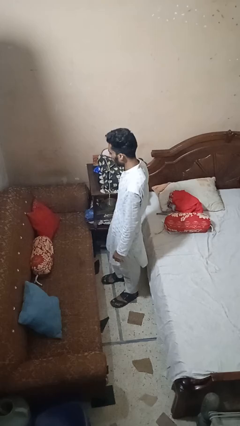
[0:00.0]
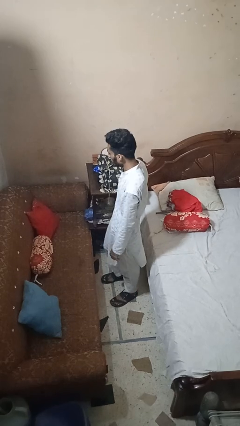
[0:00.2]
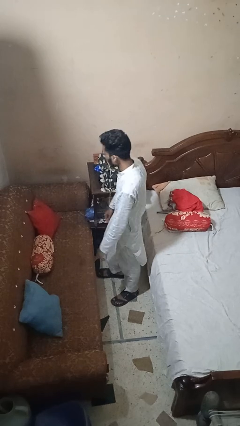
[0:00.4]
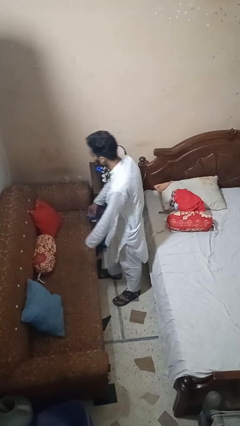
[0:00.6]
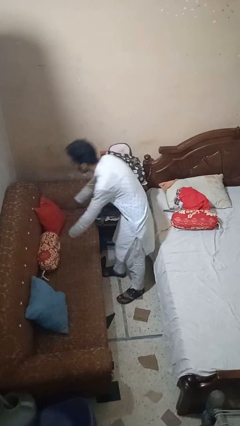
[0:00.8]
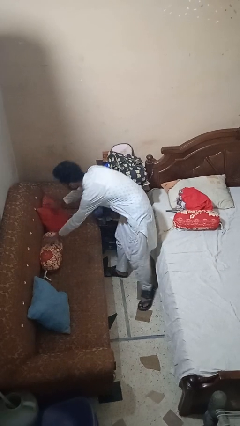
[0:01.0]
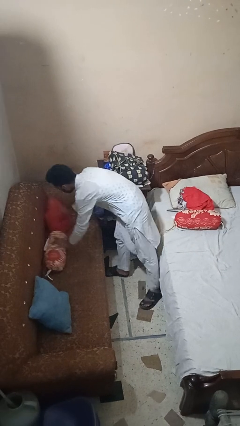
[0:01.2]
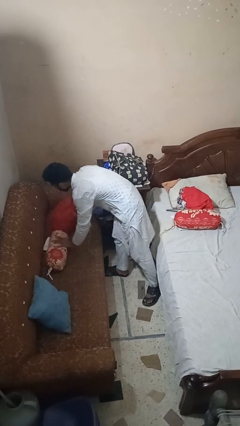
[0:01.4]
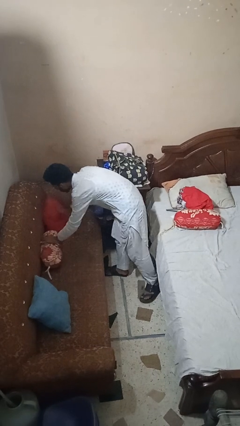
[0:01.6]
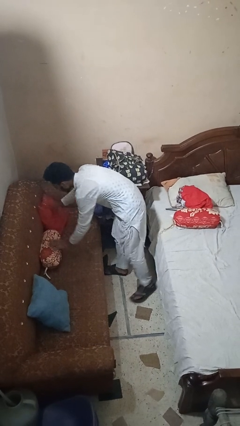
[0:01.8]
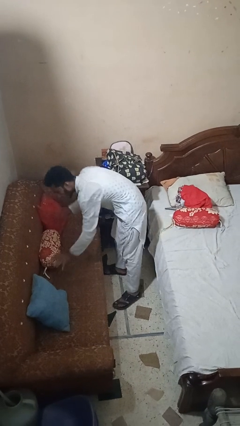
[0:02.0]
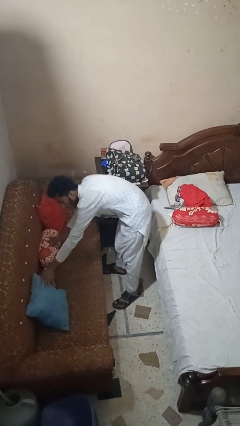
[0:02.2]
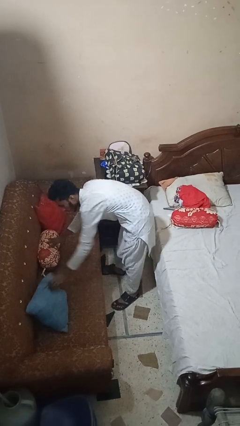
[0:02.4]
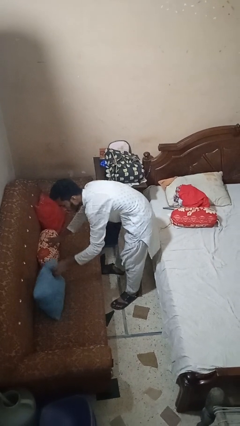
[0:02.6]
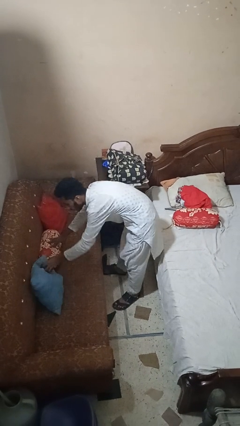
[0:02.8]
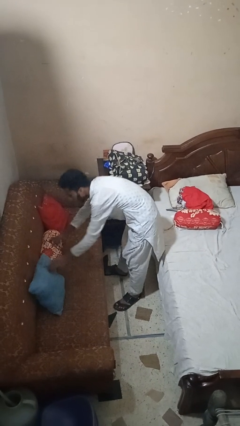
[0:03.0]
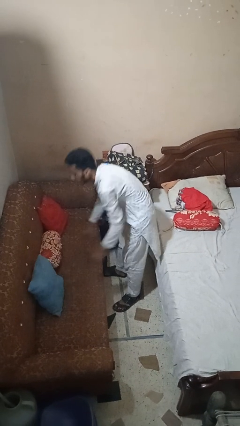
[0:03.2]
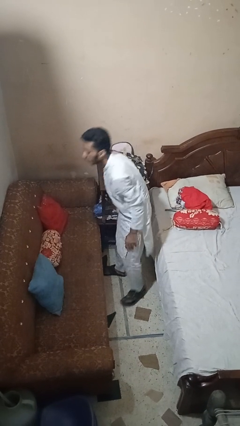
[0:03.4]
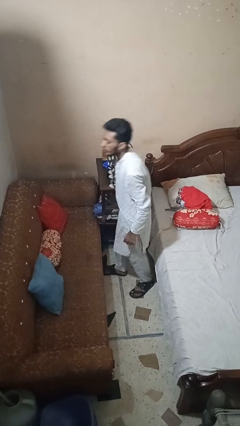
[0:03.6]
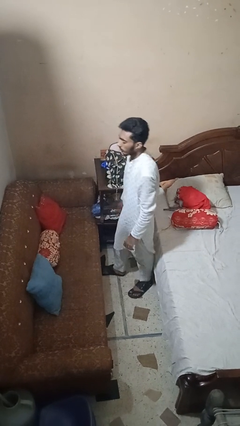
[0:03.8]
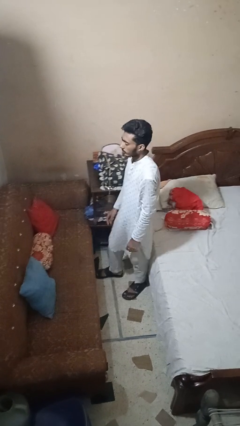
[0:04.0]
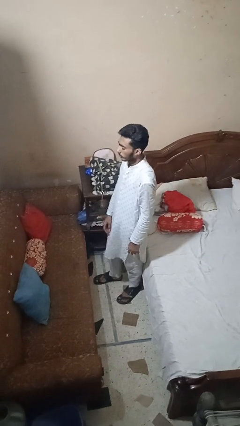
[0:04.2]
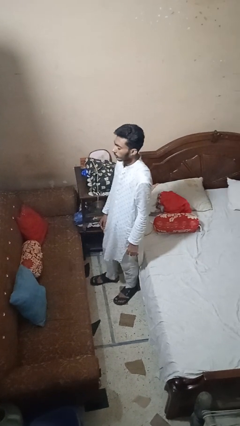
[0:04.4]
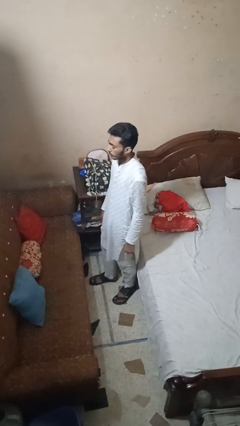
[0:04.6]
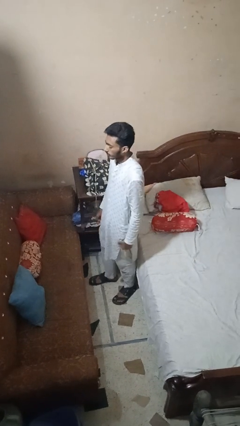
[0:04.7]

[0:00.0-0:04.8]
person searches in couch

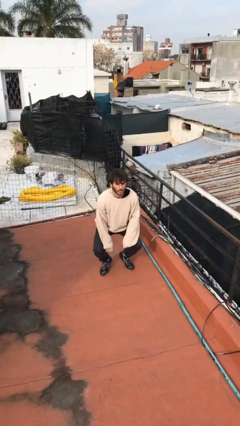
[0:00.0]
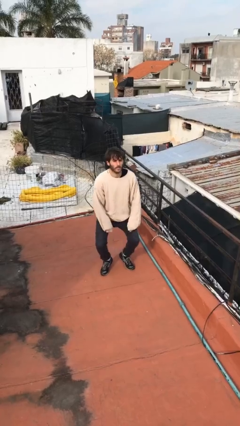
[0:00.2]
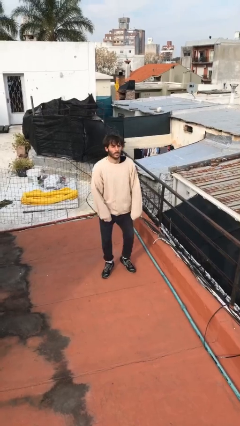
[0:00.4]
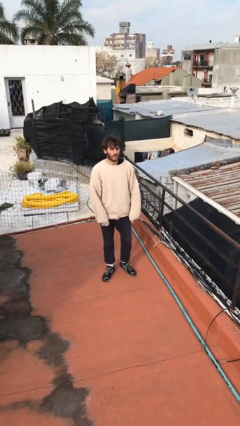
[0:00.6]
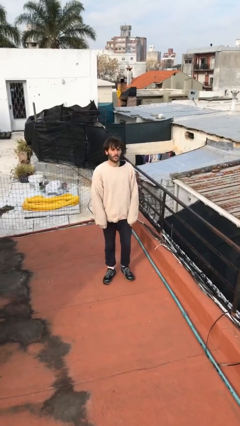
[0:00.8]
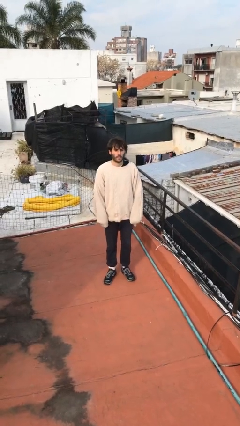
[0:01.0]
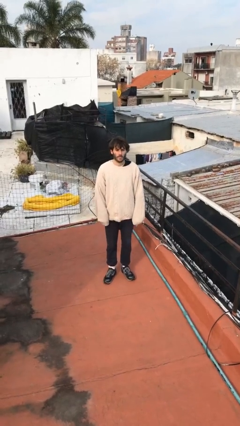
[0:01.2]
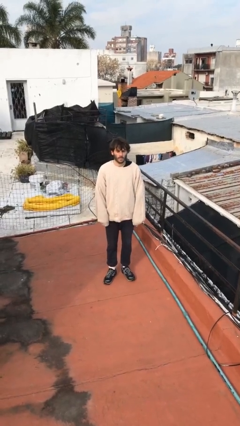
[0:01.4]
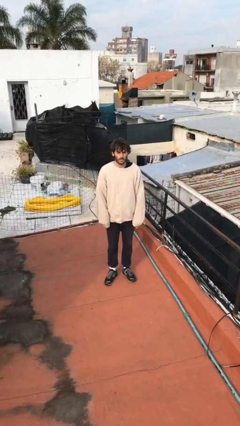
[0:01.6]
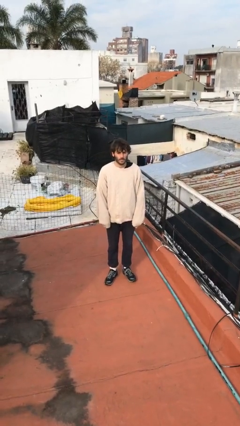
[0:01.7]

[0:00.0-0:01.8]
person stands up

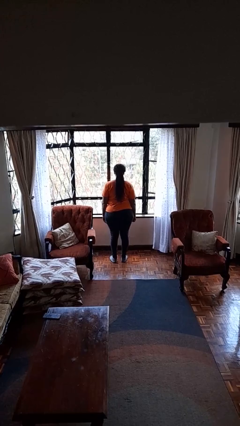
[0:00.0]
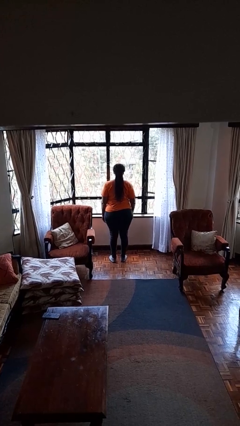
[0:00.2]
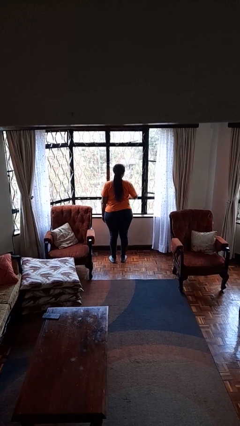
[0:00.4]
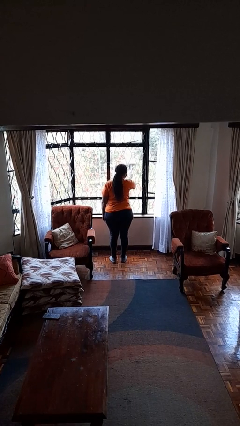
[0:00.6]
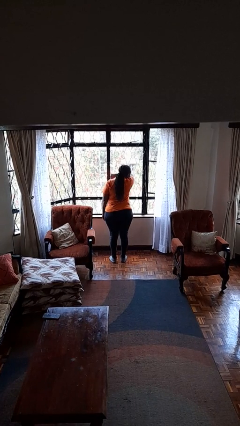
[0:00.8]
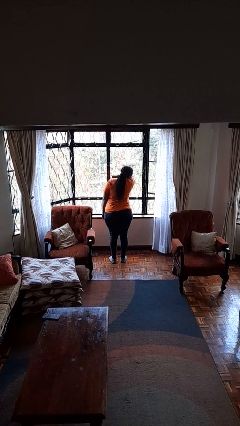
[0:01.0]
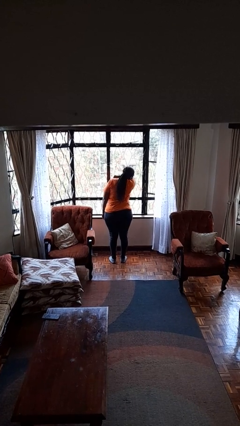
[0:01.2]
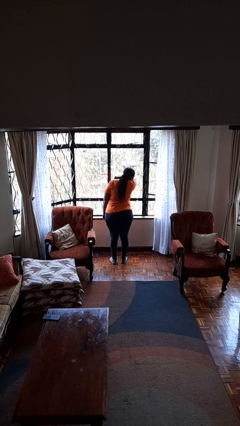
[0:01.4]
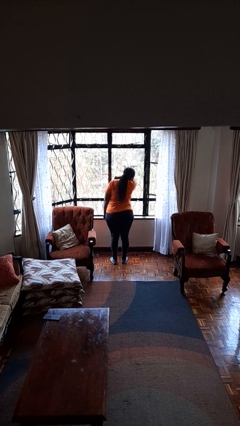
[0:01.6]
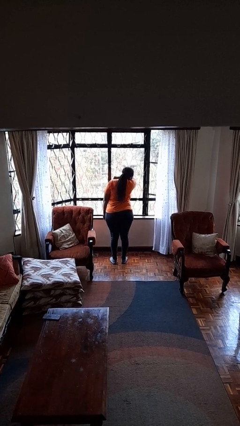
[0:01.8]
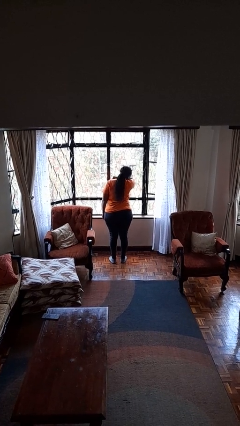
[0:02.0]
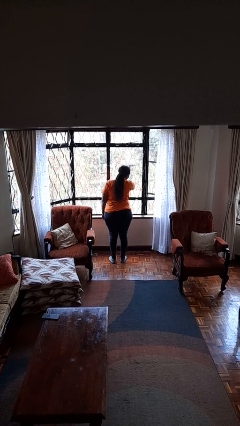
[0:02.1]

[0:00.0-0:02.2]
person sneezes into arm

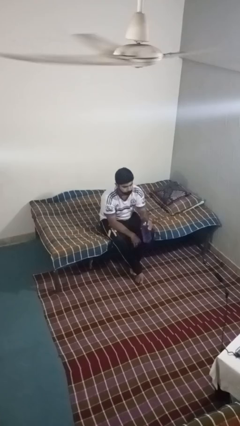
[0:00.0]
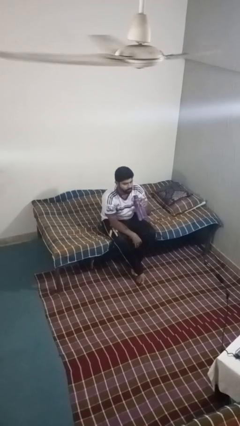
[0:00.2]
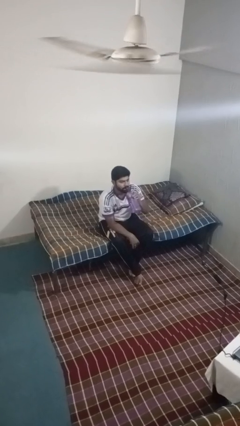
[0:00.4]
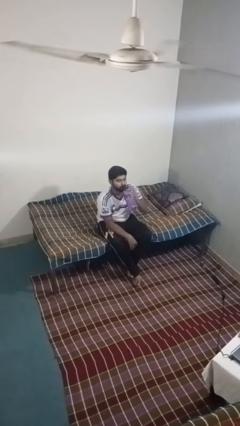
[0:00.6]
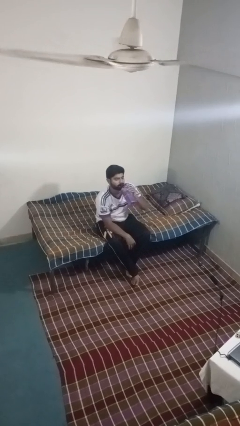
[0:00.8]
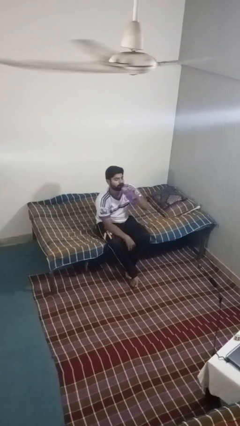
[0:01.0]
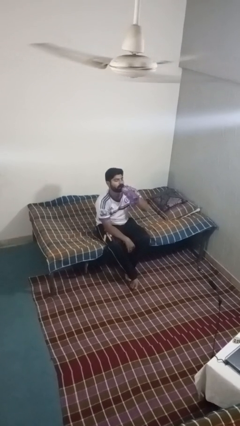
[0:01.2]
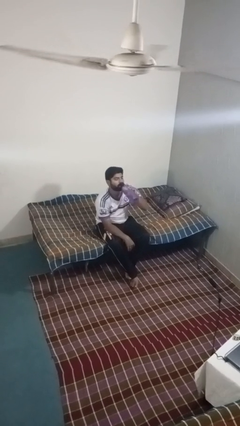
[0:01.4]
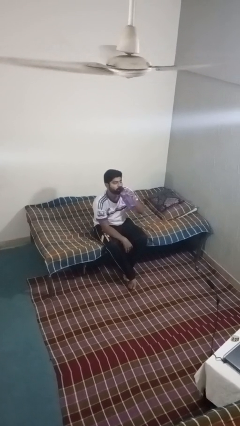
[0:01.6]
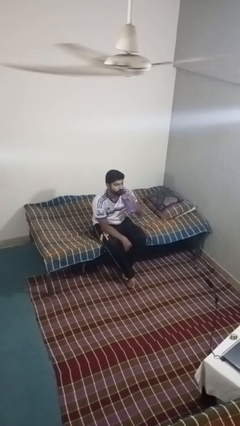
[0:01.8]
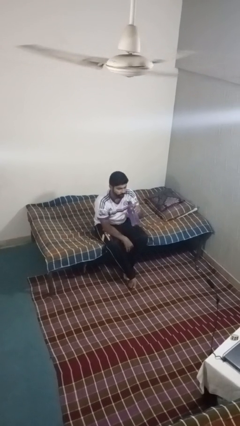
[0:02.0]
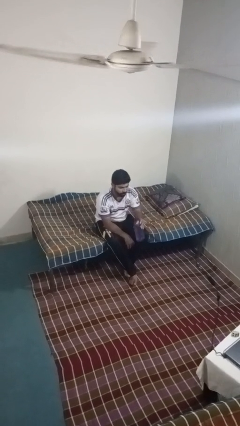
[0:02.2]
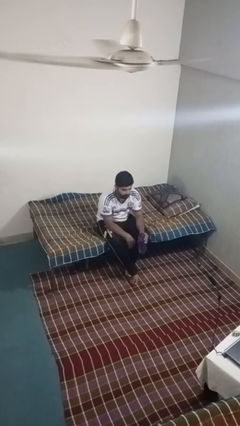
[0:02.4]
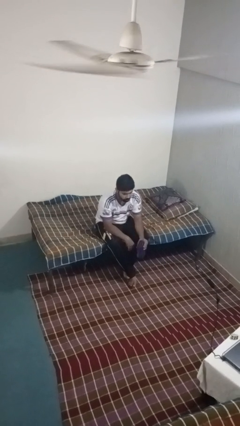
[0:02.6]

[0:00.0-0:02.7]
person drinks from bottle

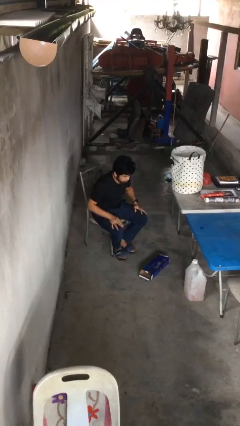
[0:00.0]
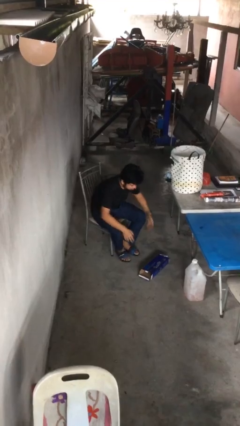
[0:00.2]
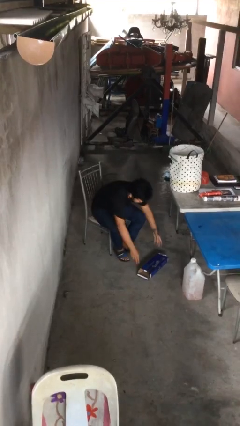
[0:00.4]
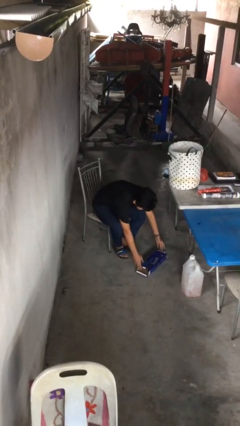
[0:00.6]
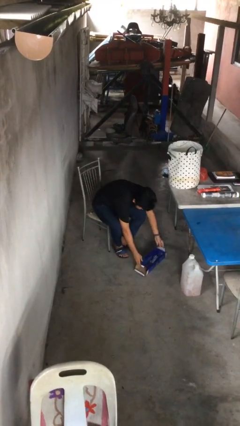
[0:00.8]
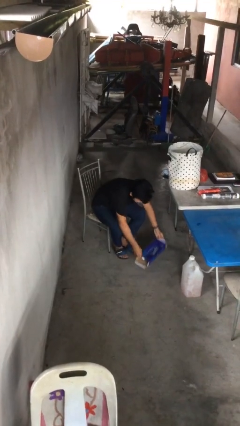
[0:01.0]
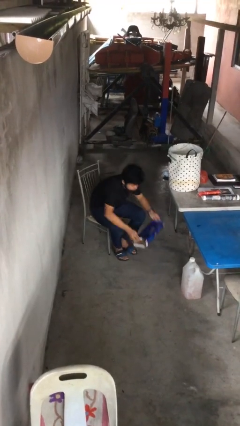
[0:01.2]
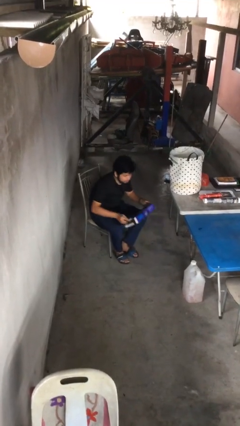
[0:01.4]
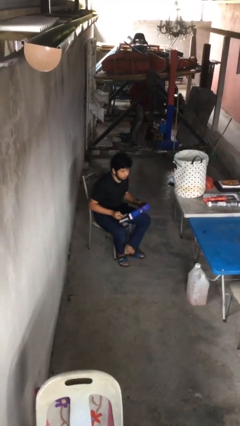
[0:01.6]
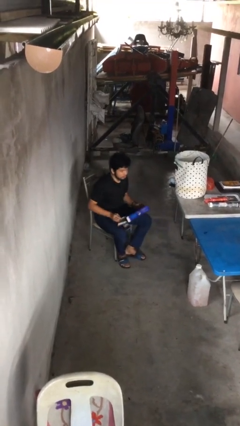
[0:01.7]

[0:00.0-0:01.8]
person picks up object from floor

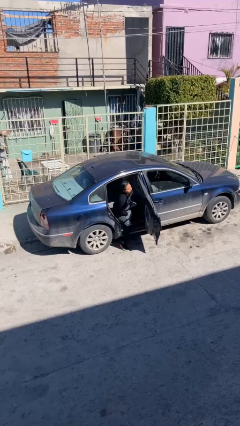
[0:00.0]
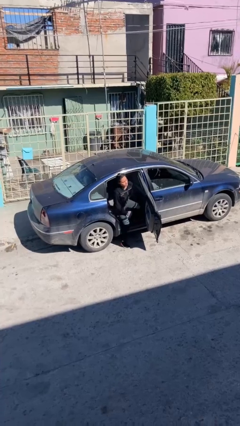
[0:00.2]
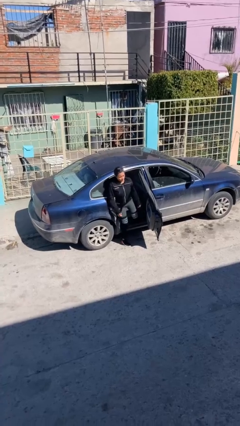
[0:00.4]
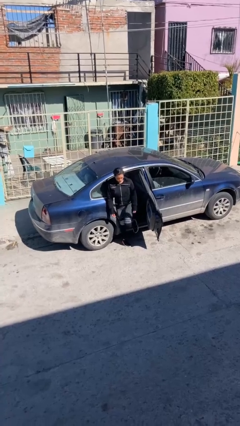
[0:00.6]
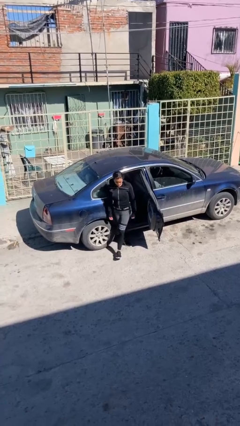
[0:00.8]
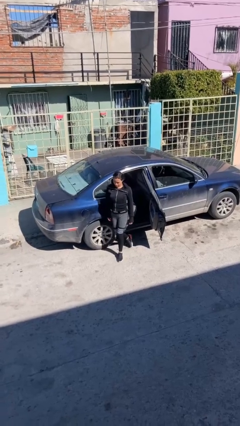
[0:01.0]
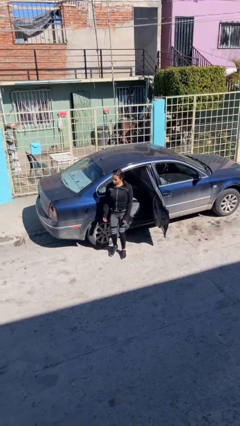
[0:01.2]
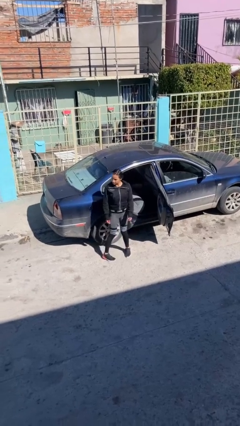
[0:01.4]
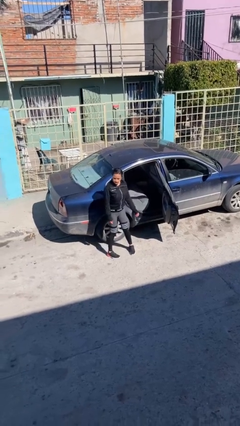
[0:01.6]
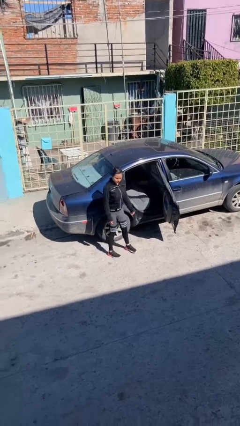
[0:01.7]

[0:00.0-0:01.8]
person exits car

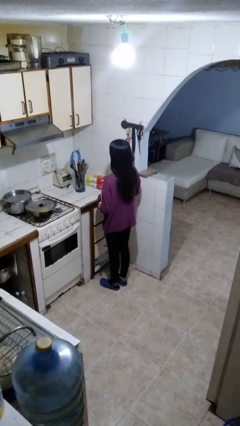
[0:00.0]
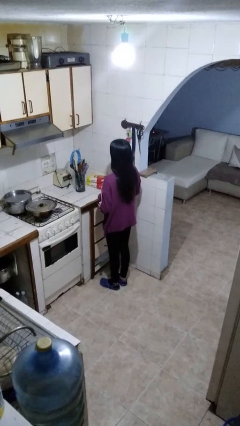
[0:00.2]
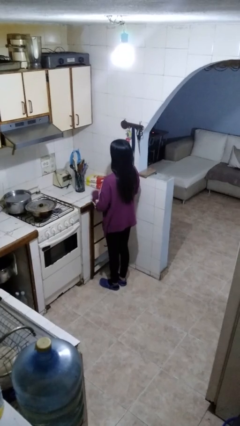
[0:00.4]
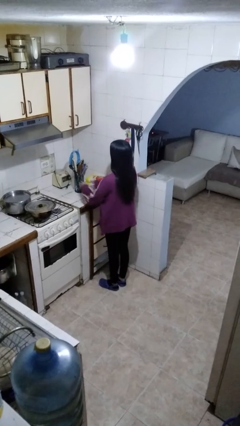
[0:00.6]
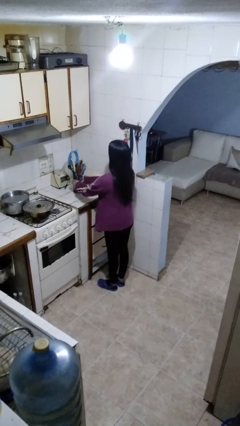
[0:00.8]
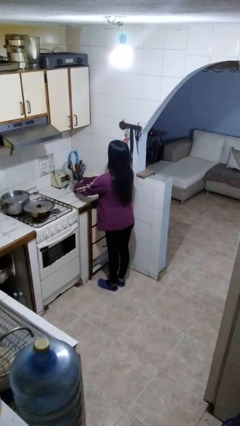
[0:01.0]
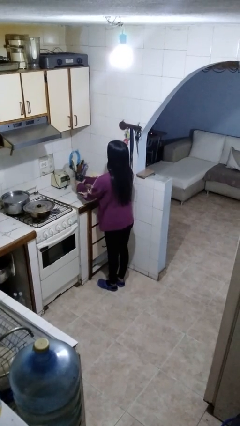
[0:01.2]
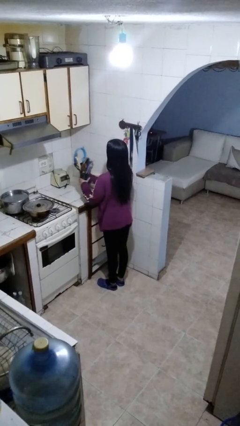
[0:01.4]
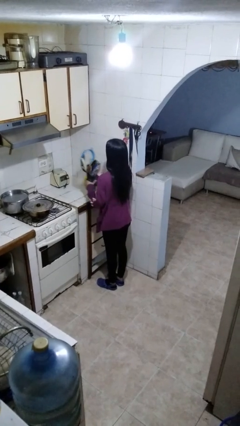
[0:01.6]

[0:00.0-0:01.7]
person puts down object on countertop

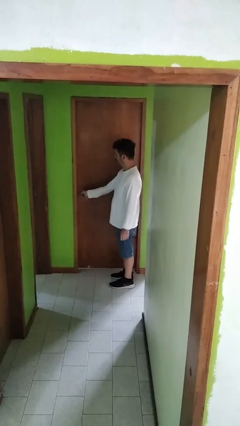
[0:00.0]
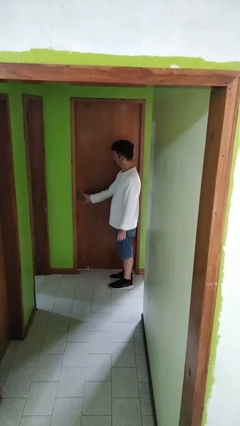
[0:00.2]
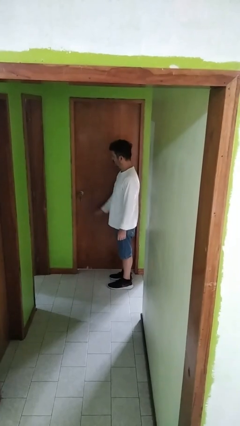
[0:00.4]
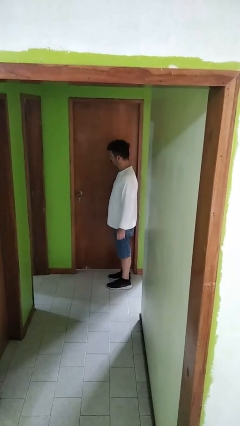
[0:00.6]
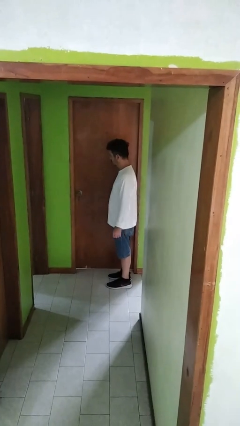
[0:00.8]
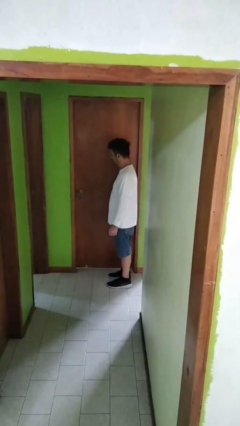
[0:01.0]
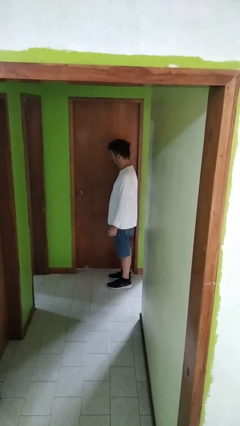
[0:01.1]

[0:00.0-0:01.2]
person locks door with keys
